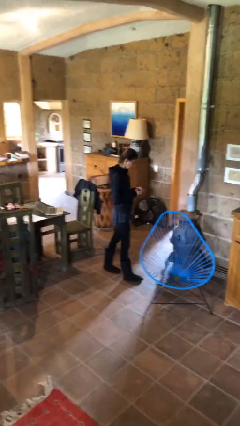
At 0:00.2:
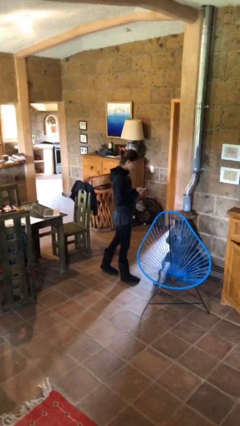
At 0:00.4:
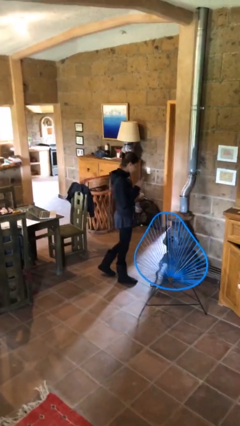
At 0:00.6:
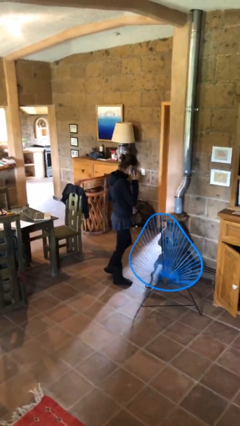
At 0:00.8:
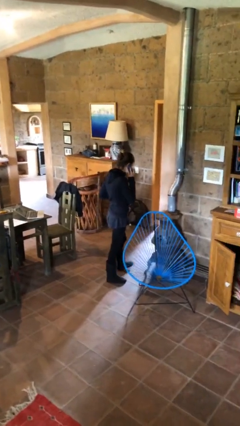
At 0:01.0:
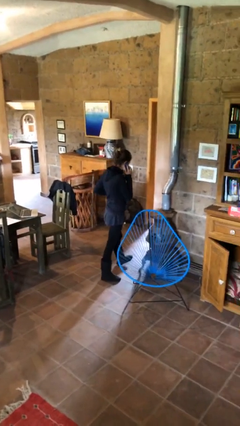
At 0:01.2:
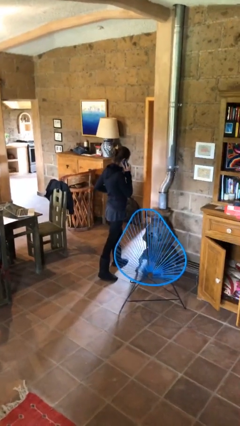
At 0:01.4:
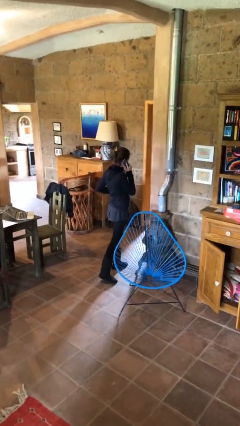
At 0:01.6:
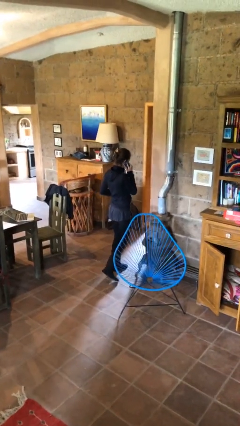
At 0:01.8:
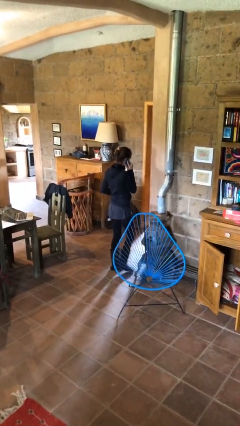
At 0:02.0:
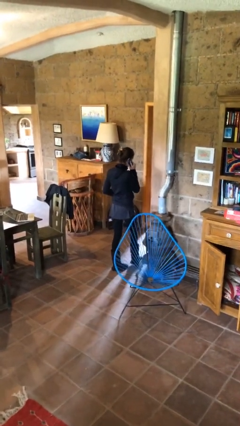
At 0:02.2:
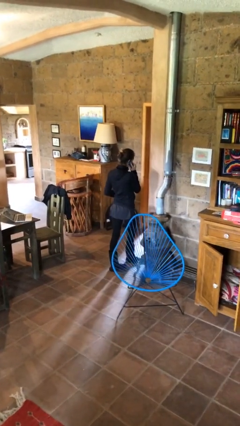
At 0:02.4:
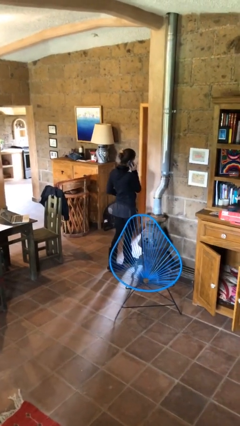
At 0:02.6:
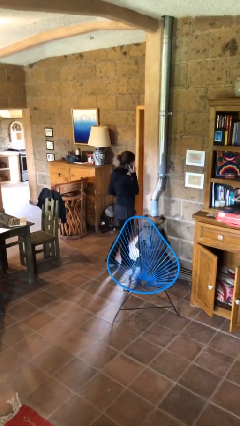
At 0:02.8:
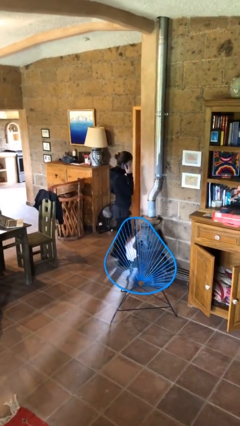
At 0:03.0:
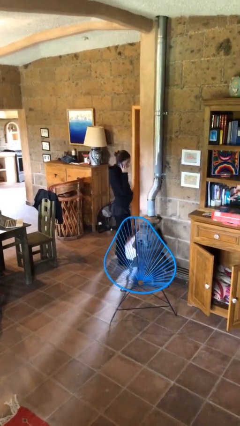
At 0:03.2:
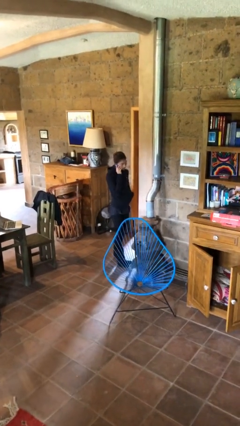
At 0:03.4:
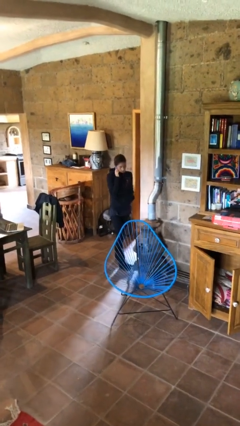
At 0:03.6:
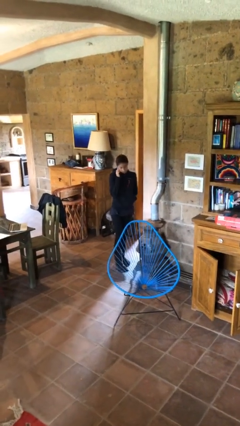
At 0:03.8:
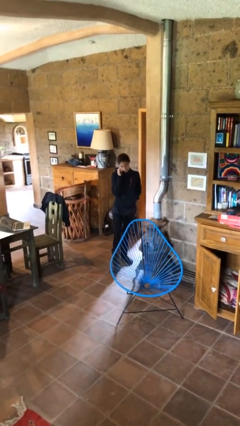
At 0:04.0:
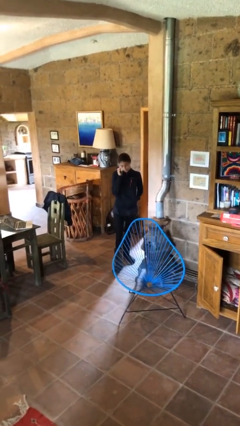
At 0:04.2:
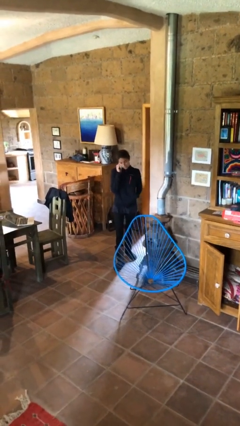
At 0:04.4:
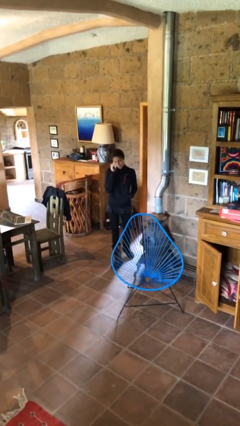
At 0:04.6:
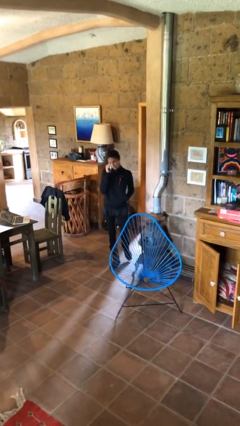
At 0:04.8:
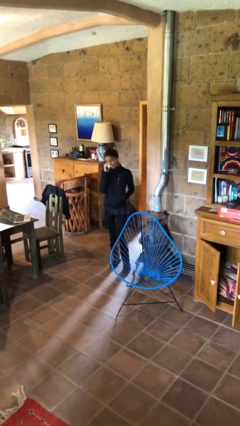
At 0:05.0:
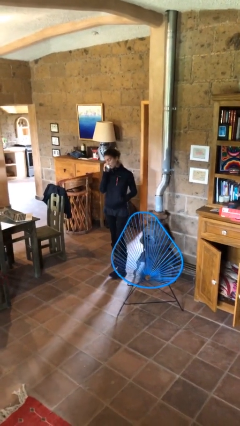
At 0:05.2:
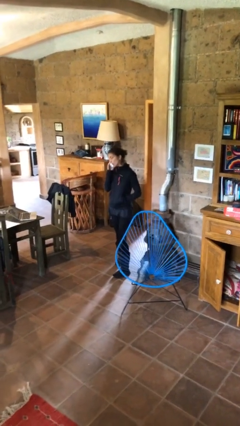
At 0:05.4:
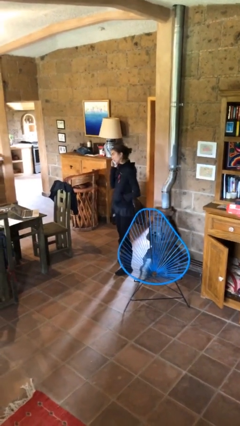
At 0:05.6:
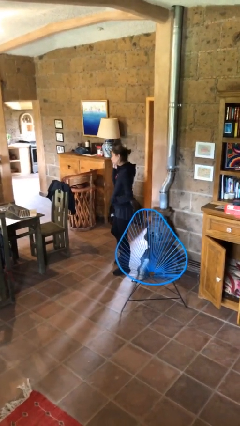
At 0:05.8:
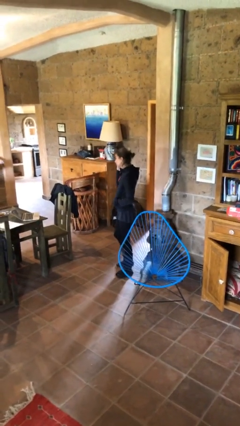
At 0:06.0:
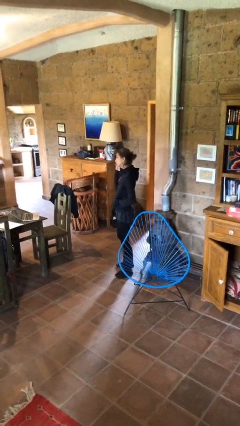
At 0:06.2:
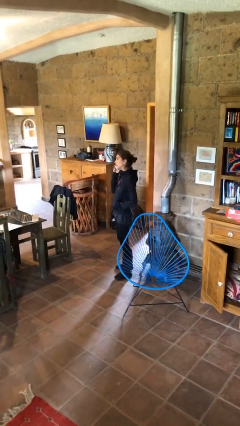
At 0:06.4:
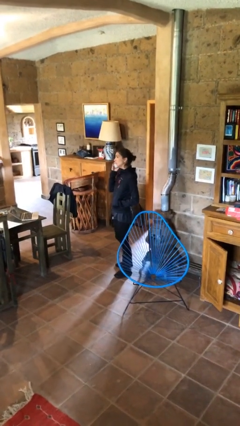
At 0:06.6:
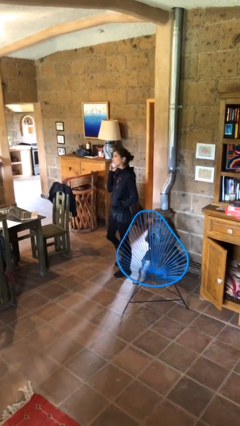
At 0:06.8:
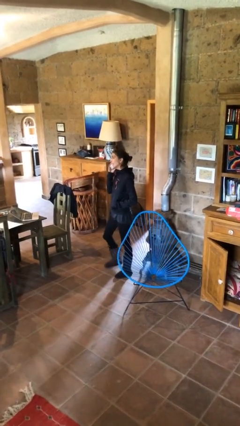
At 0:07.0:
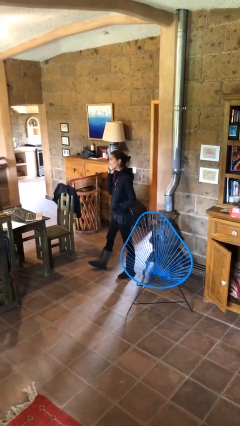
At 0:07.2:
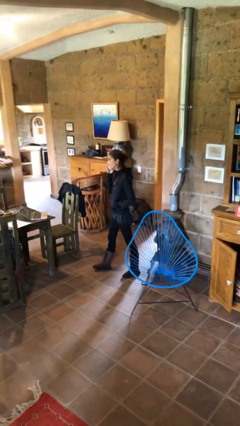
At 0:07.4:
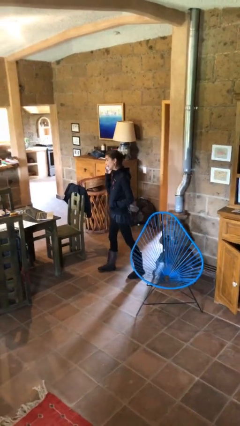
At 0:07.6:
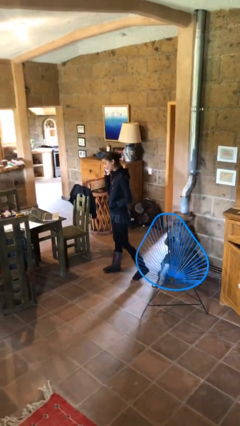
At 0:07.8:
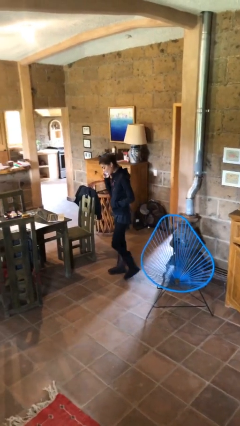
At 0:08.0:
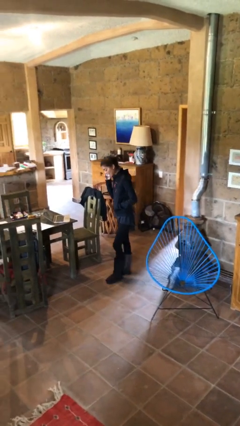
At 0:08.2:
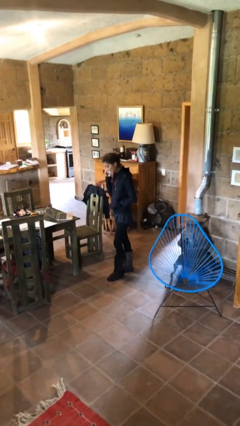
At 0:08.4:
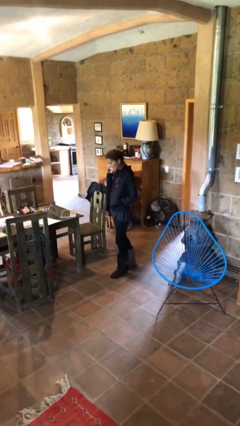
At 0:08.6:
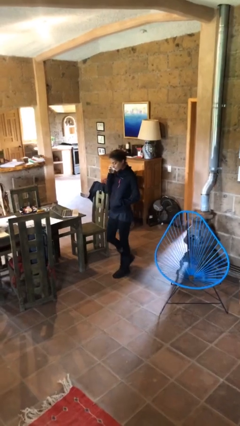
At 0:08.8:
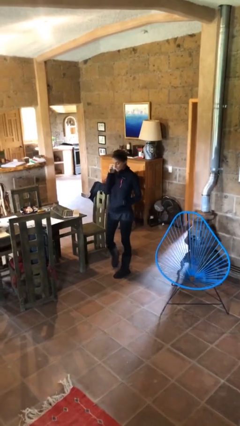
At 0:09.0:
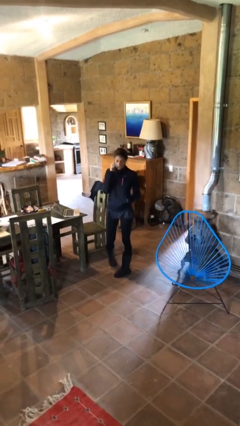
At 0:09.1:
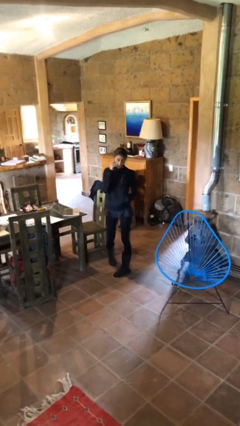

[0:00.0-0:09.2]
person talks on phone

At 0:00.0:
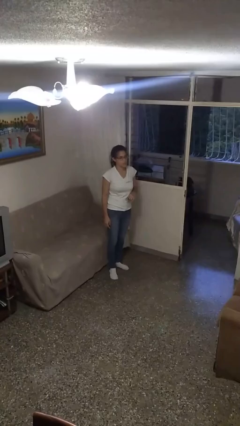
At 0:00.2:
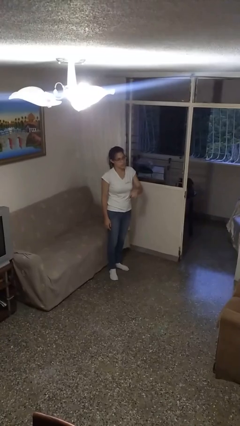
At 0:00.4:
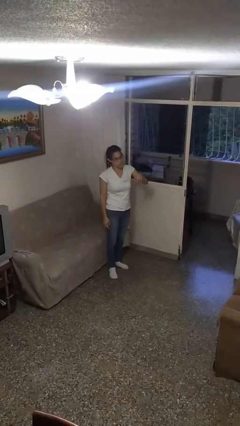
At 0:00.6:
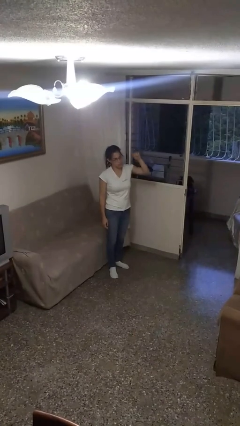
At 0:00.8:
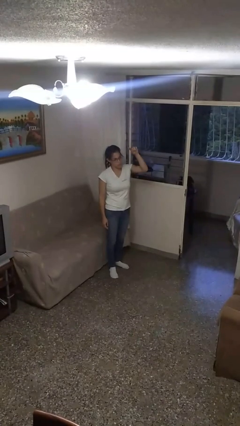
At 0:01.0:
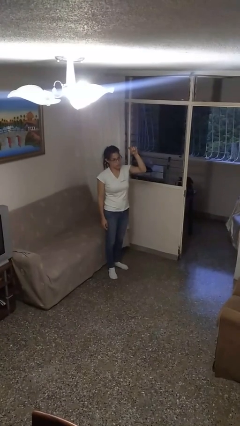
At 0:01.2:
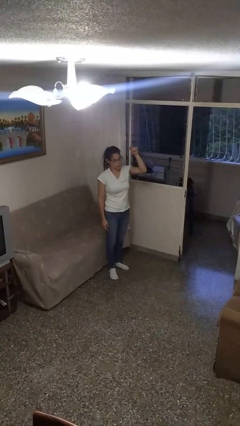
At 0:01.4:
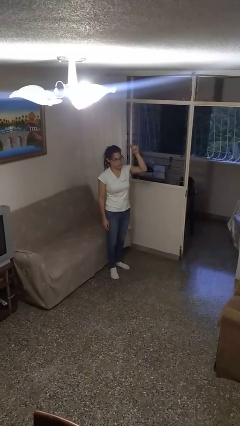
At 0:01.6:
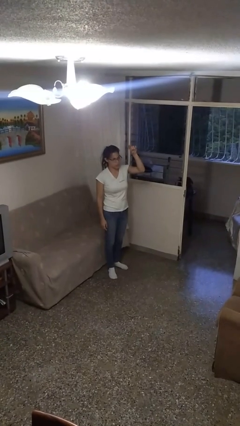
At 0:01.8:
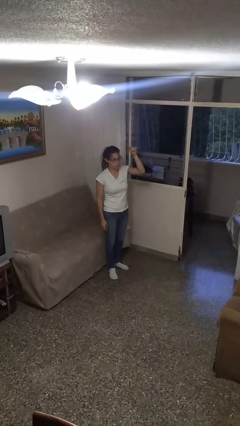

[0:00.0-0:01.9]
person gestures swipe up

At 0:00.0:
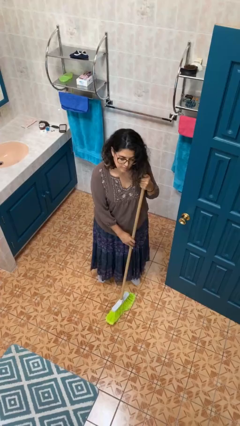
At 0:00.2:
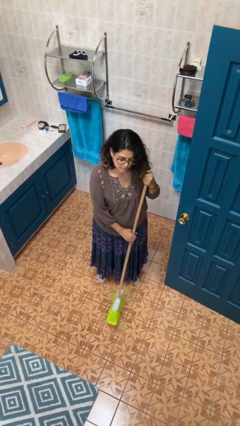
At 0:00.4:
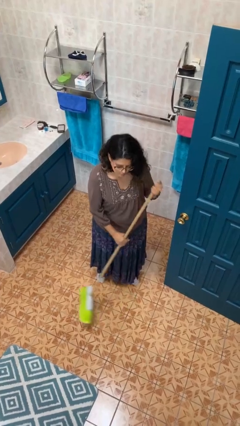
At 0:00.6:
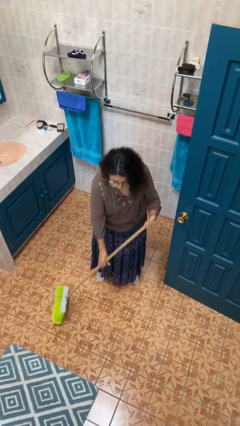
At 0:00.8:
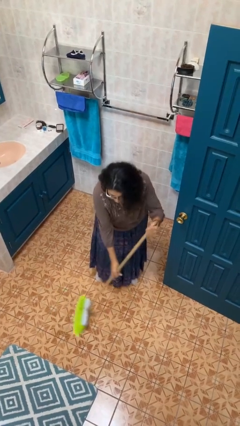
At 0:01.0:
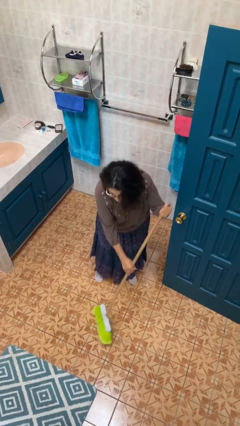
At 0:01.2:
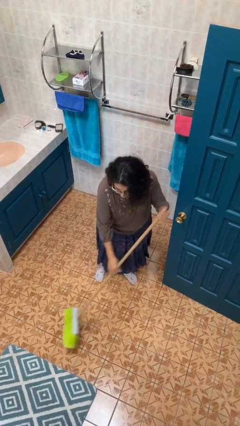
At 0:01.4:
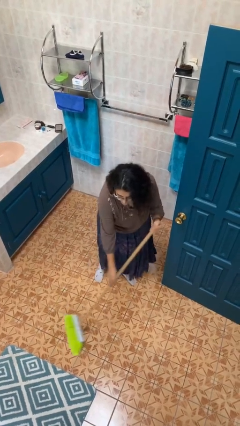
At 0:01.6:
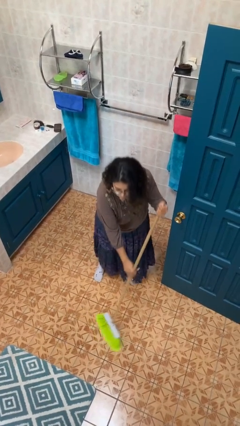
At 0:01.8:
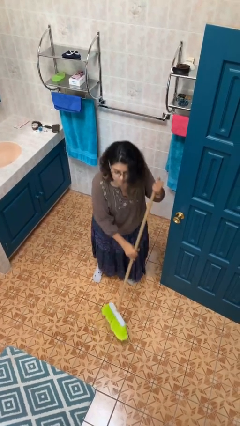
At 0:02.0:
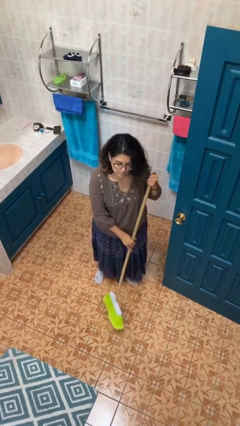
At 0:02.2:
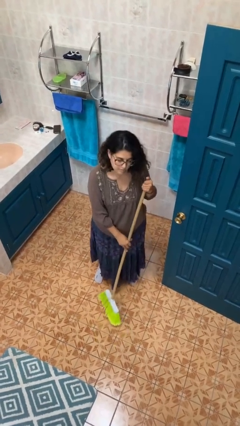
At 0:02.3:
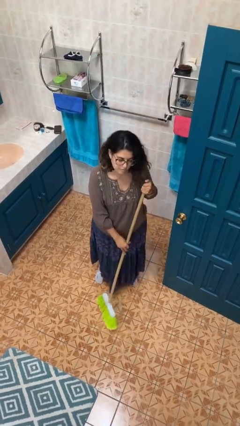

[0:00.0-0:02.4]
person sweeps floor

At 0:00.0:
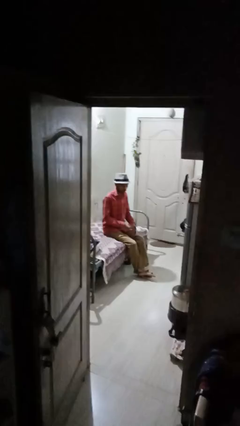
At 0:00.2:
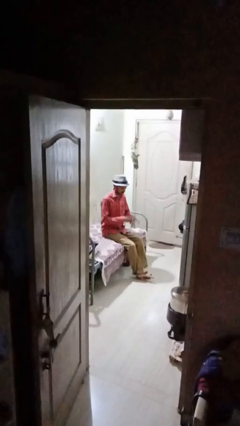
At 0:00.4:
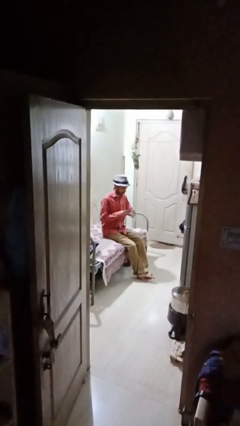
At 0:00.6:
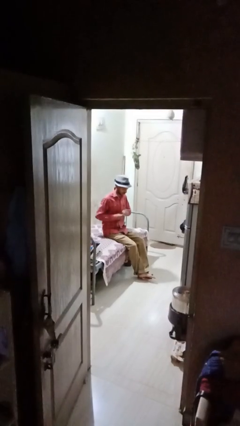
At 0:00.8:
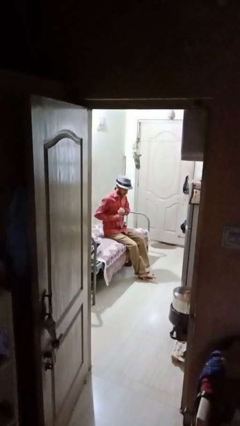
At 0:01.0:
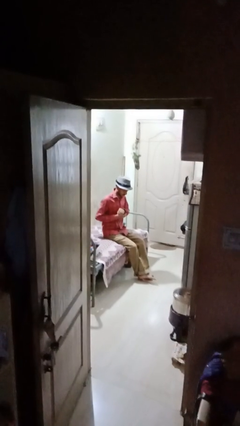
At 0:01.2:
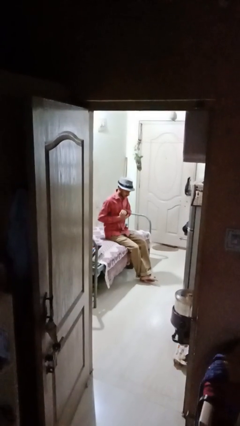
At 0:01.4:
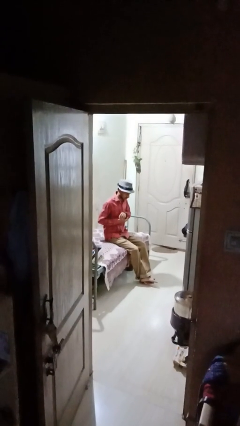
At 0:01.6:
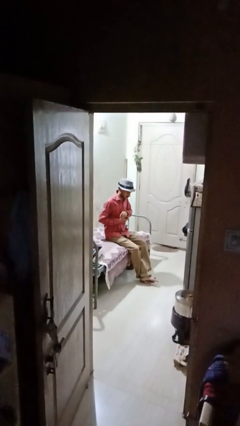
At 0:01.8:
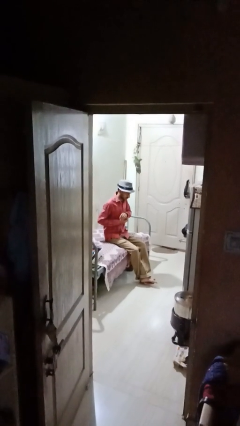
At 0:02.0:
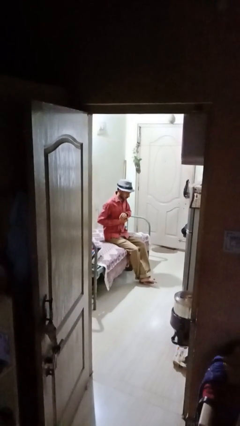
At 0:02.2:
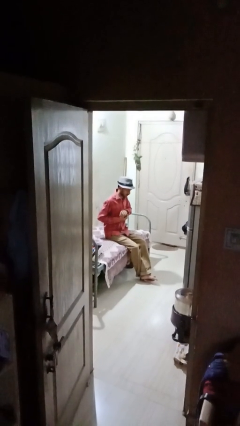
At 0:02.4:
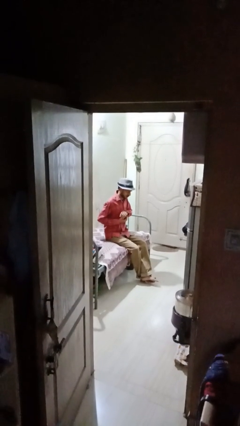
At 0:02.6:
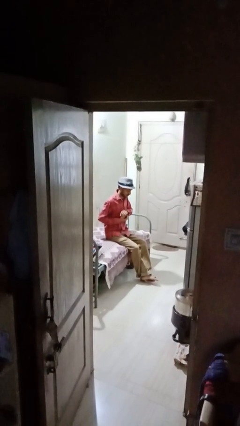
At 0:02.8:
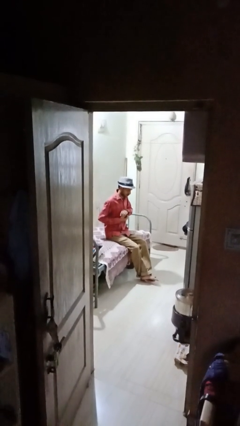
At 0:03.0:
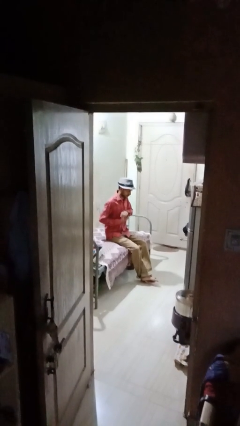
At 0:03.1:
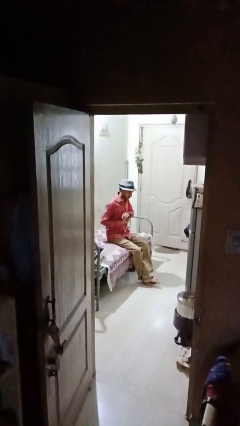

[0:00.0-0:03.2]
person puts on wristwatch

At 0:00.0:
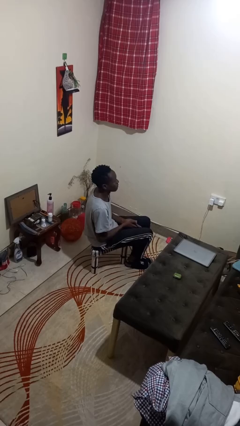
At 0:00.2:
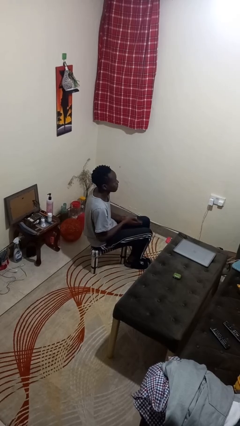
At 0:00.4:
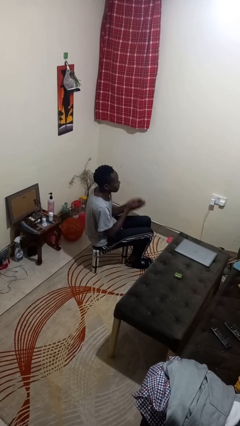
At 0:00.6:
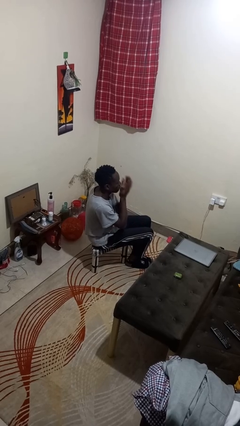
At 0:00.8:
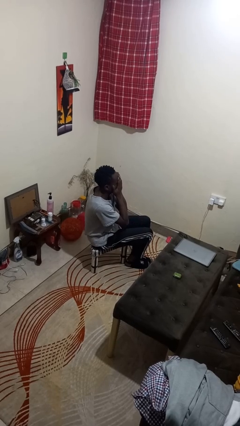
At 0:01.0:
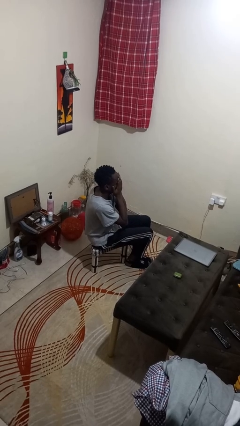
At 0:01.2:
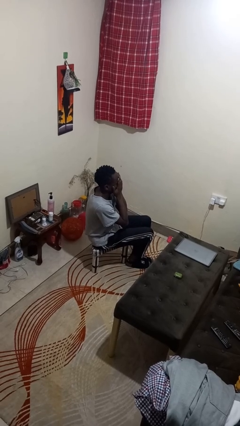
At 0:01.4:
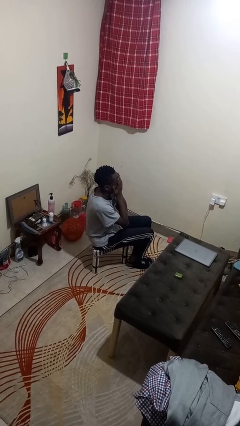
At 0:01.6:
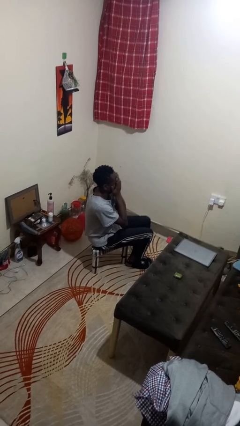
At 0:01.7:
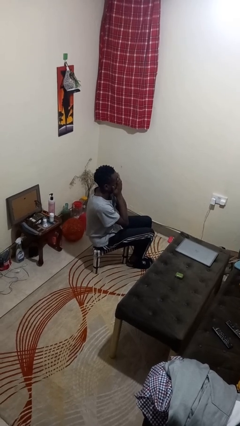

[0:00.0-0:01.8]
person covers face with hands
